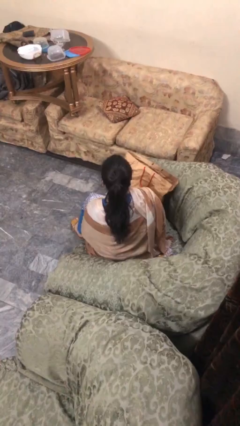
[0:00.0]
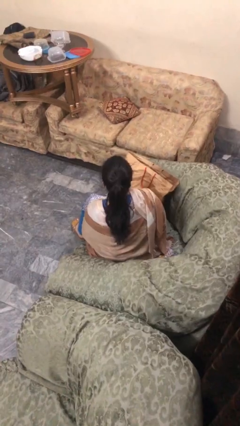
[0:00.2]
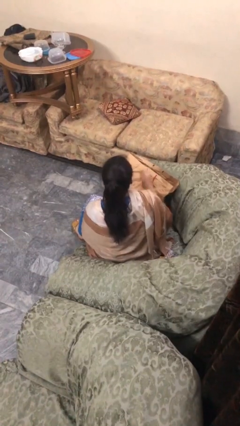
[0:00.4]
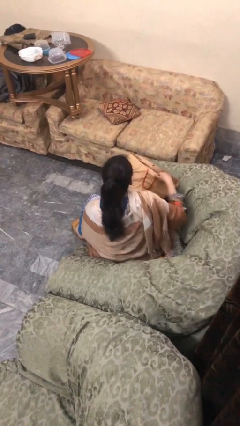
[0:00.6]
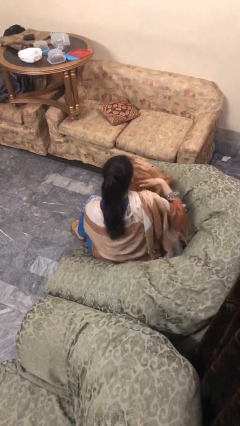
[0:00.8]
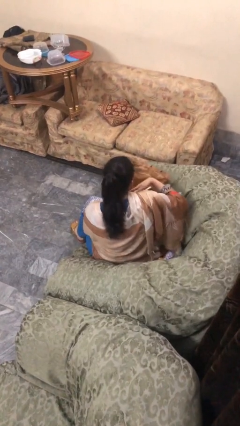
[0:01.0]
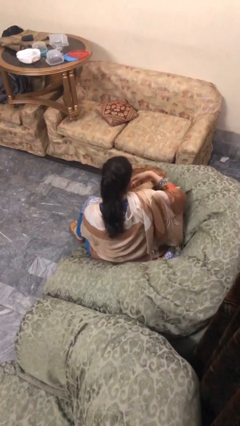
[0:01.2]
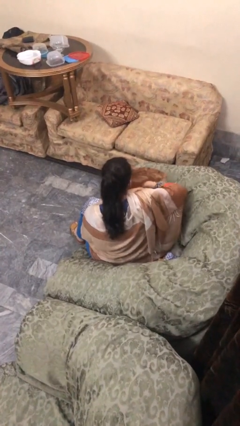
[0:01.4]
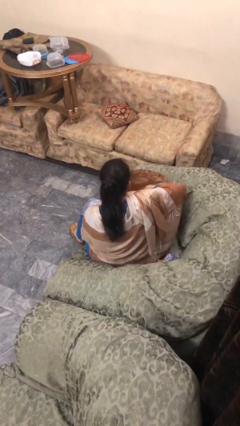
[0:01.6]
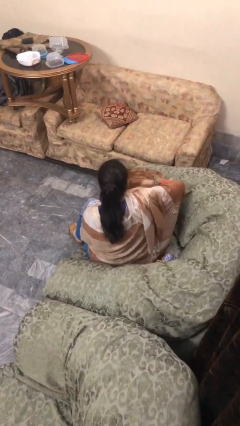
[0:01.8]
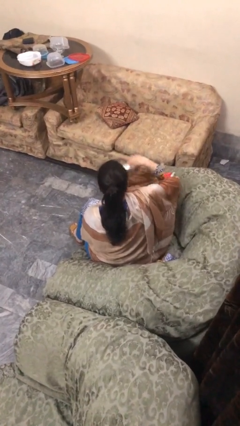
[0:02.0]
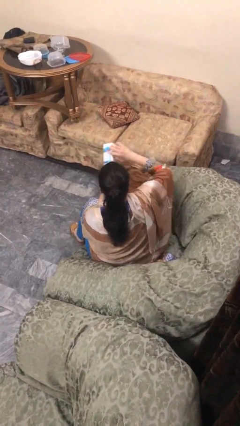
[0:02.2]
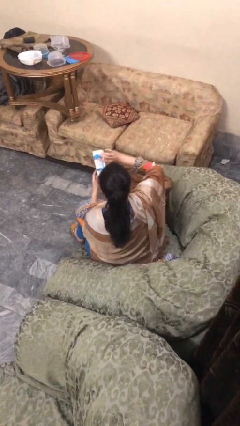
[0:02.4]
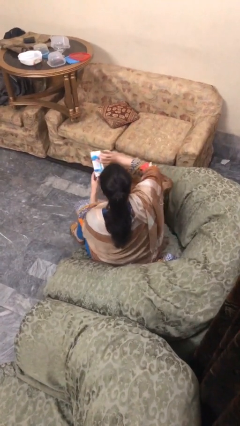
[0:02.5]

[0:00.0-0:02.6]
person takes object from bag

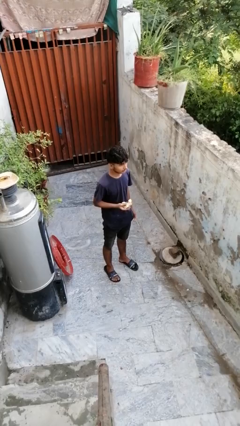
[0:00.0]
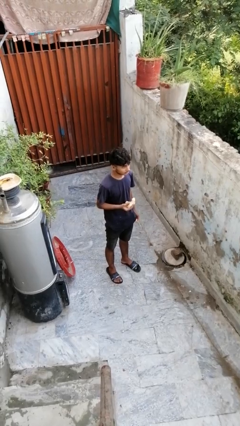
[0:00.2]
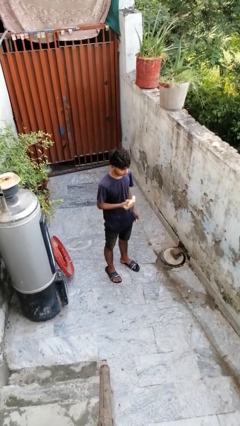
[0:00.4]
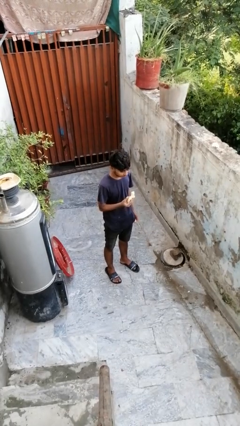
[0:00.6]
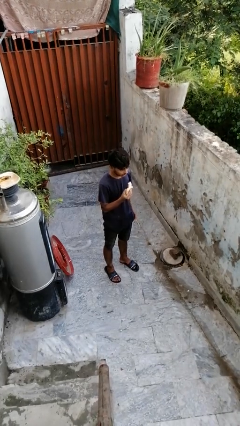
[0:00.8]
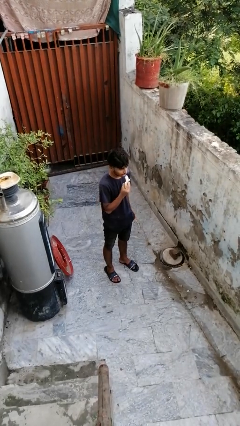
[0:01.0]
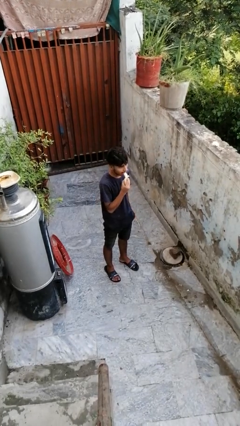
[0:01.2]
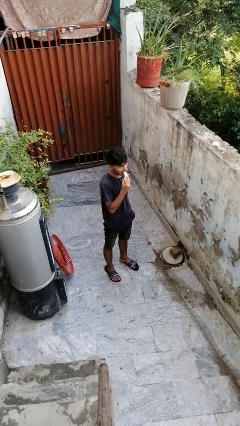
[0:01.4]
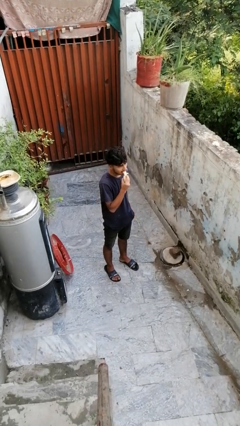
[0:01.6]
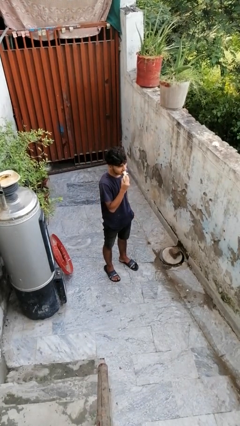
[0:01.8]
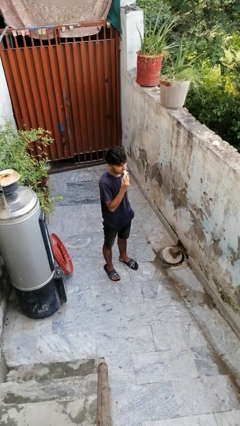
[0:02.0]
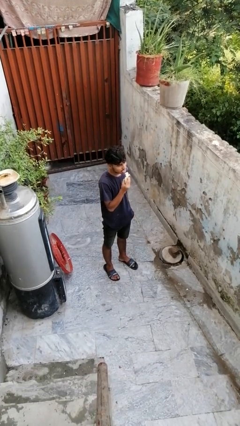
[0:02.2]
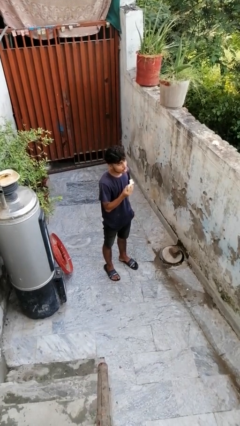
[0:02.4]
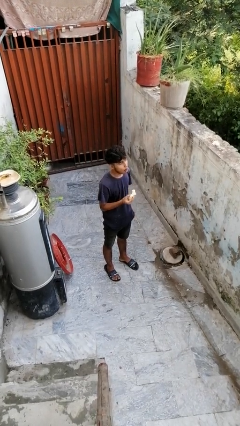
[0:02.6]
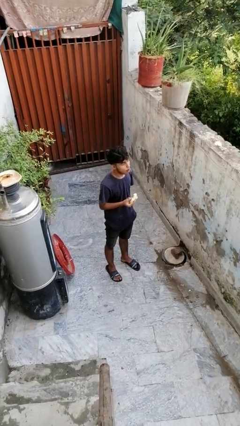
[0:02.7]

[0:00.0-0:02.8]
person eats banana

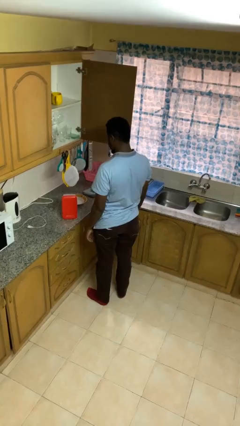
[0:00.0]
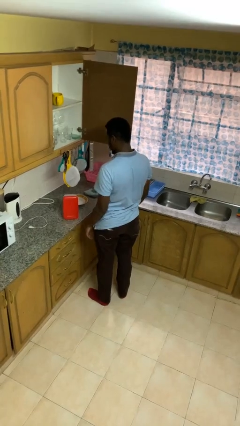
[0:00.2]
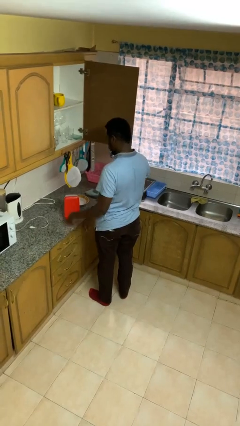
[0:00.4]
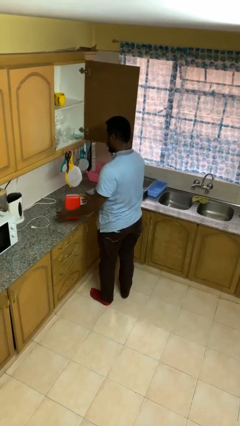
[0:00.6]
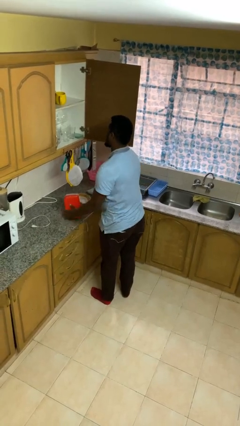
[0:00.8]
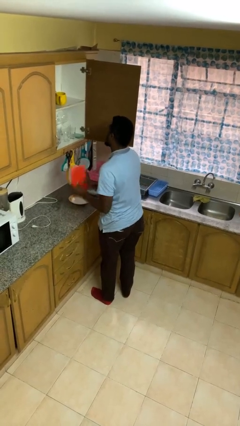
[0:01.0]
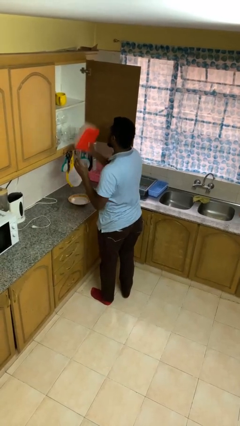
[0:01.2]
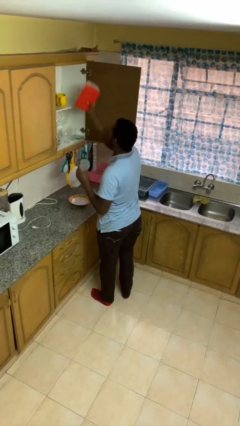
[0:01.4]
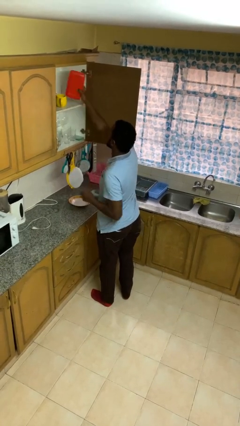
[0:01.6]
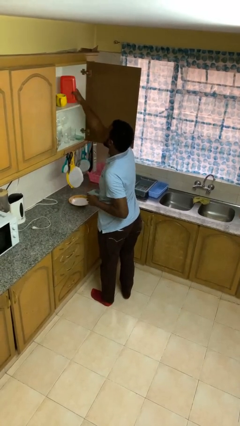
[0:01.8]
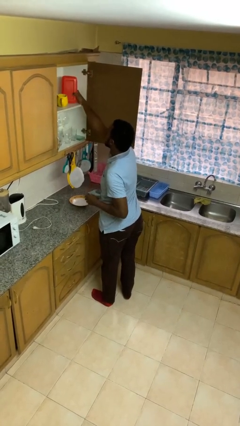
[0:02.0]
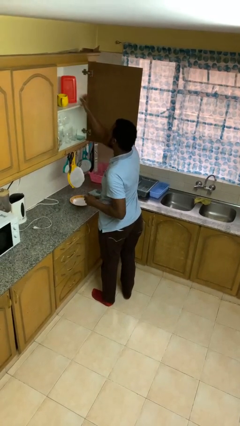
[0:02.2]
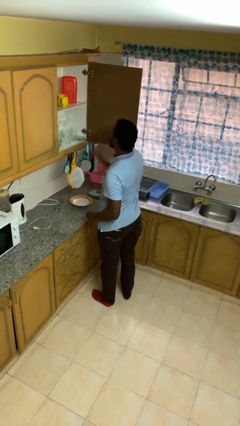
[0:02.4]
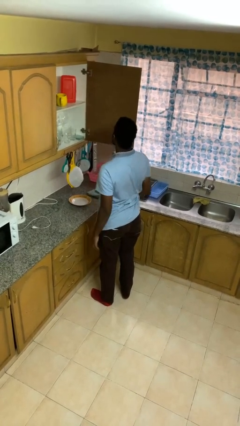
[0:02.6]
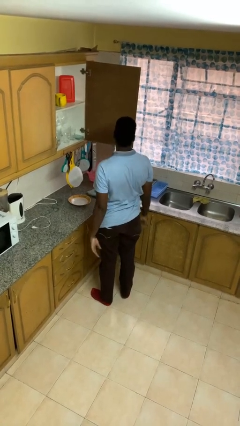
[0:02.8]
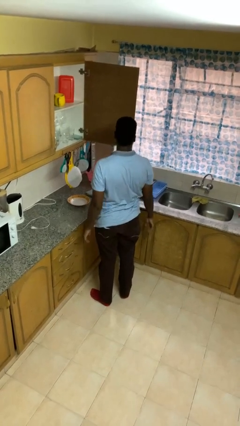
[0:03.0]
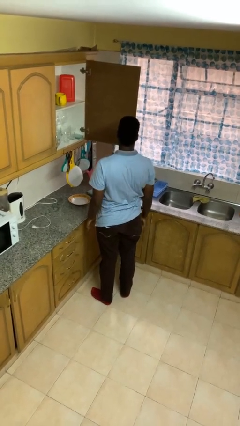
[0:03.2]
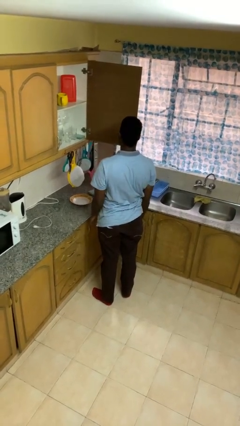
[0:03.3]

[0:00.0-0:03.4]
person puts object in cabinet

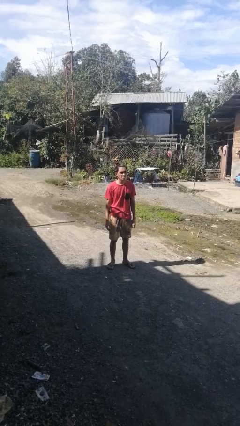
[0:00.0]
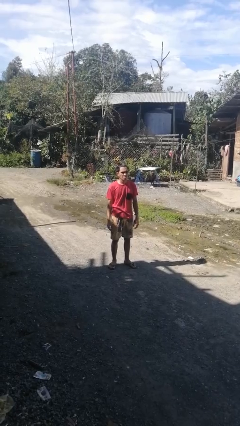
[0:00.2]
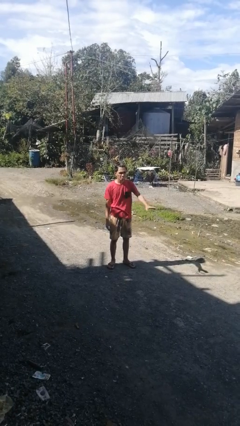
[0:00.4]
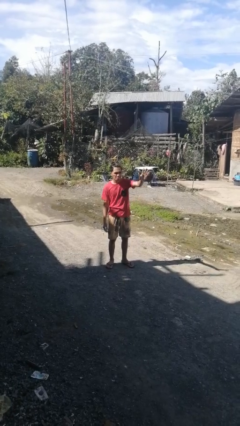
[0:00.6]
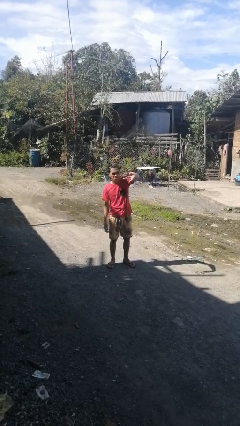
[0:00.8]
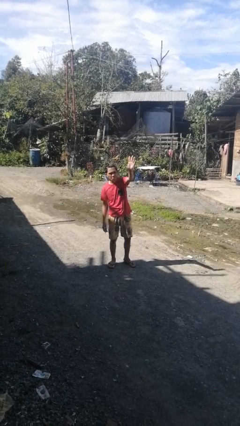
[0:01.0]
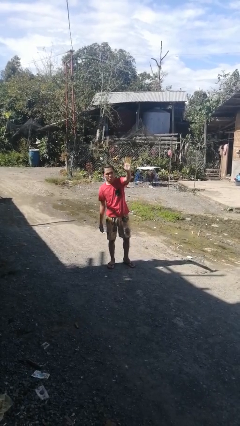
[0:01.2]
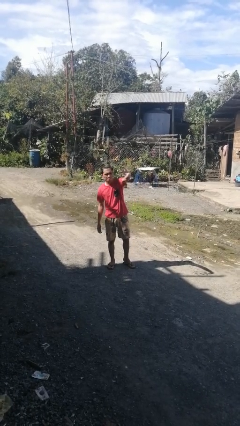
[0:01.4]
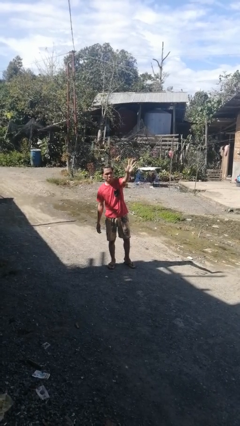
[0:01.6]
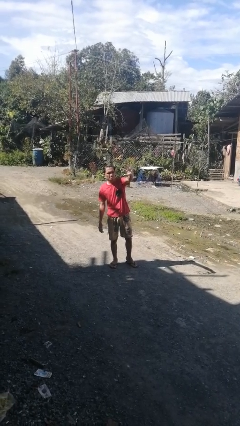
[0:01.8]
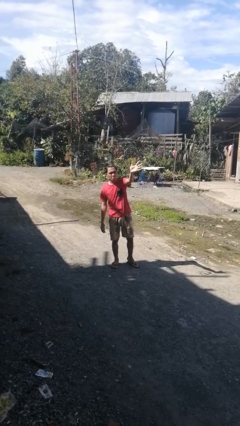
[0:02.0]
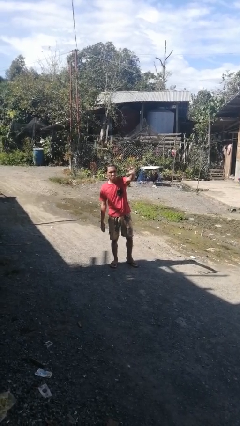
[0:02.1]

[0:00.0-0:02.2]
person waves at person

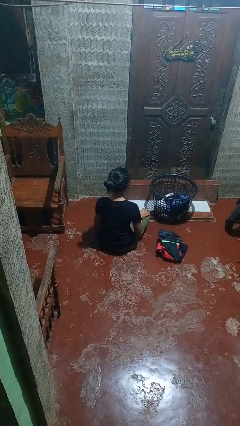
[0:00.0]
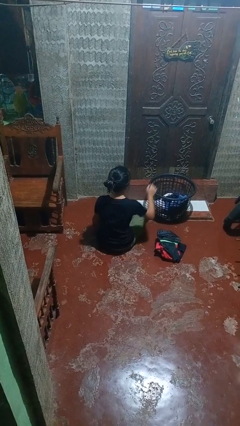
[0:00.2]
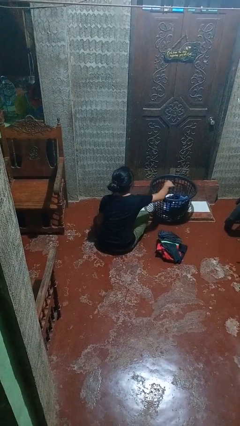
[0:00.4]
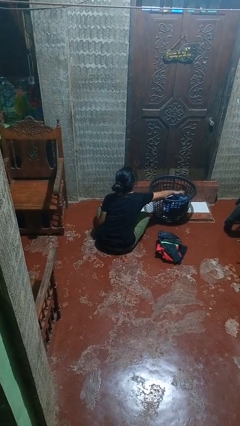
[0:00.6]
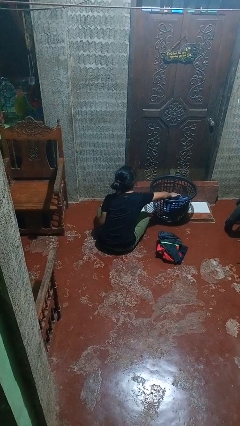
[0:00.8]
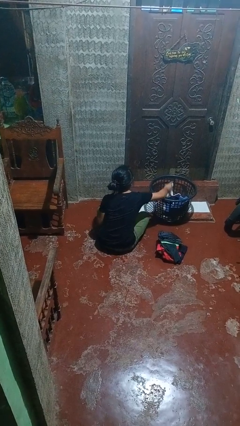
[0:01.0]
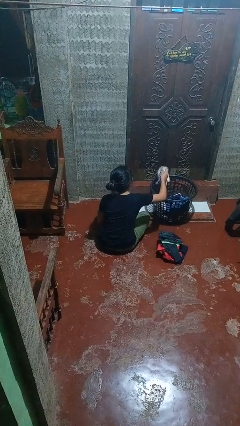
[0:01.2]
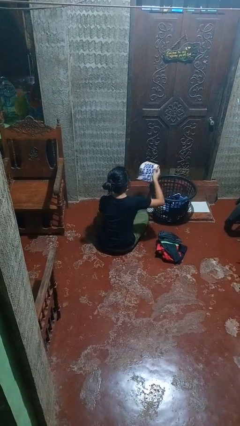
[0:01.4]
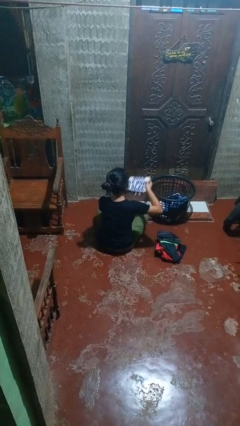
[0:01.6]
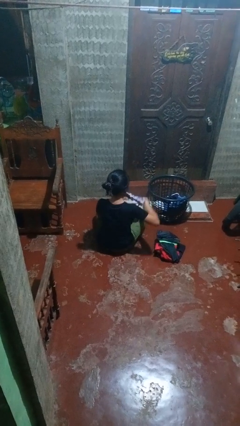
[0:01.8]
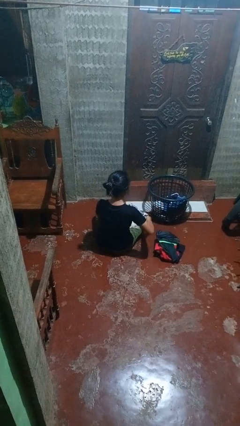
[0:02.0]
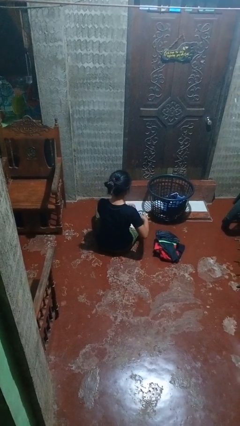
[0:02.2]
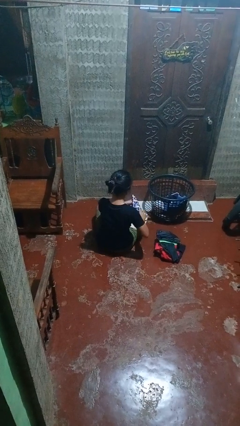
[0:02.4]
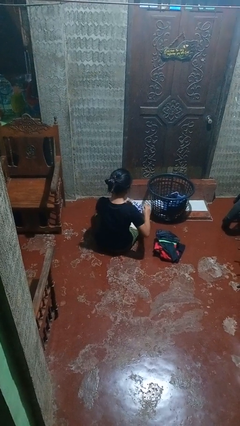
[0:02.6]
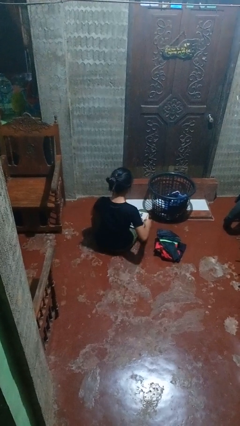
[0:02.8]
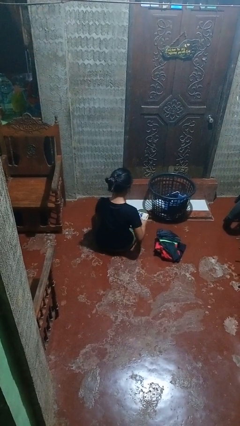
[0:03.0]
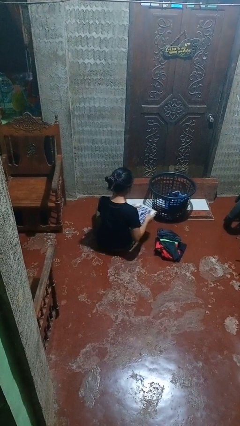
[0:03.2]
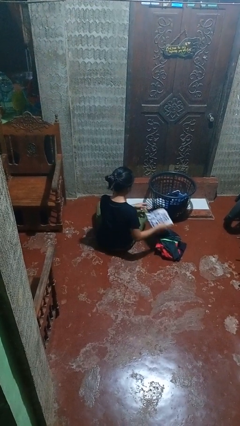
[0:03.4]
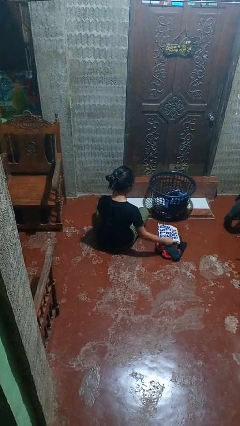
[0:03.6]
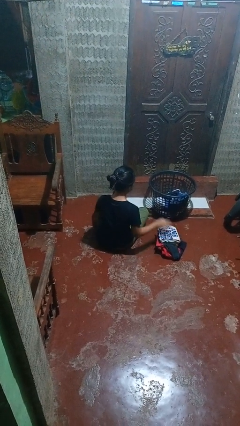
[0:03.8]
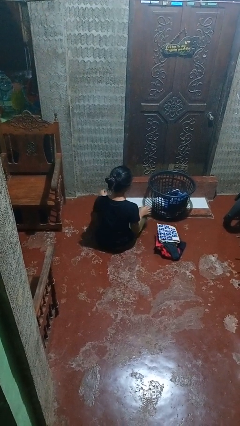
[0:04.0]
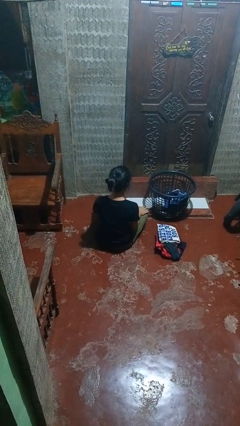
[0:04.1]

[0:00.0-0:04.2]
person folds shirt

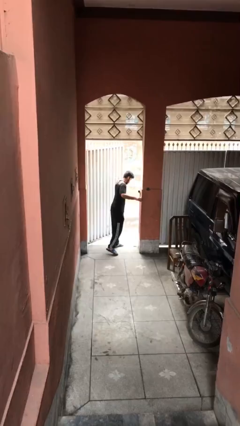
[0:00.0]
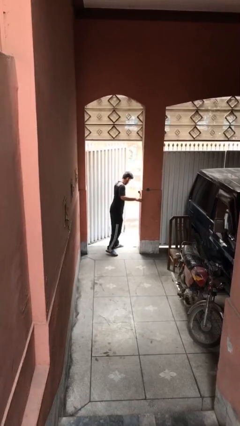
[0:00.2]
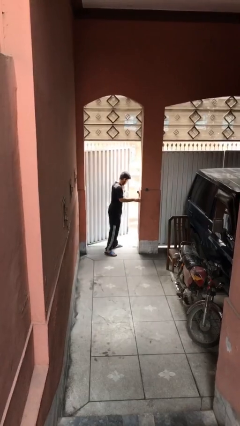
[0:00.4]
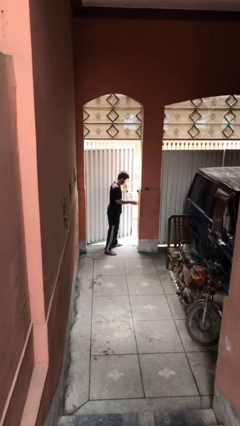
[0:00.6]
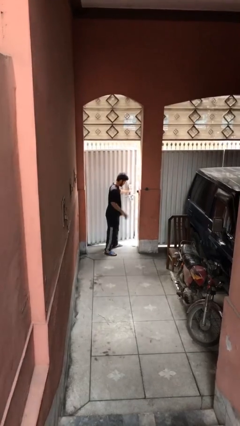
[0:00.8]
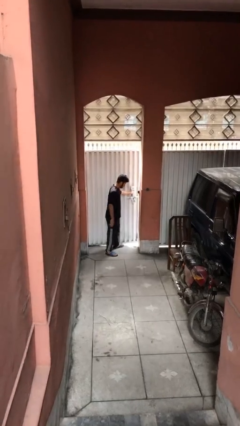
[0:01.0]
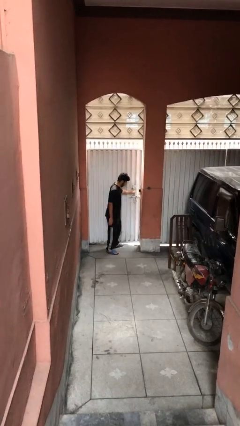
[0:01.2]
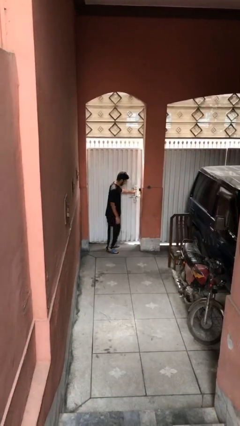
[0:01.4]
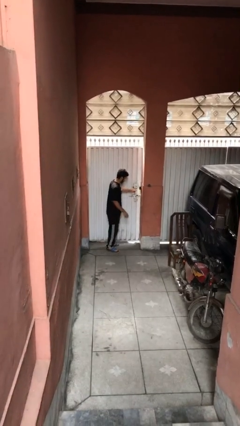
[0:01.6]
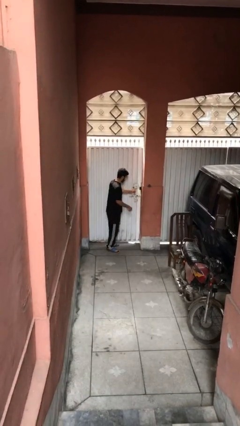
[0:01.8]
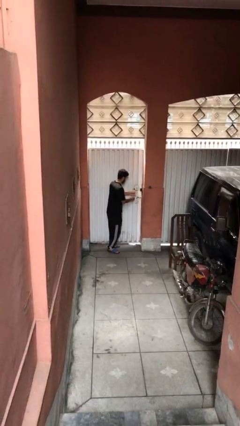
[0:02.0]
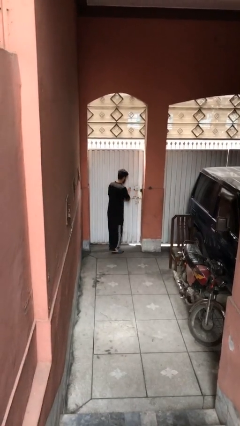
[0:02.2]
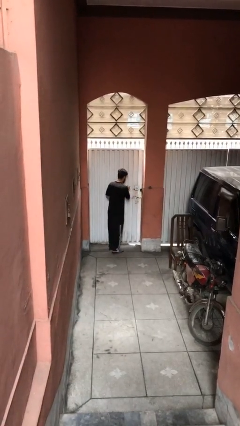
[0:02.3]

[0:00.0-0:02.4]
person closes facility door
